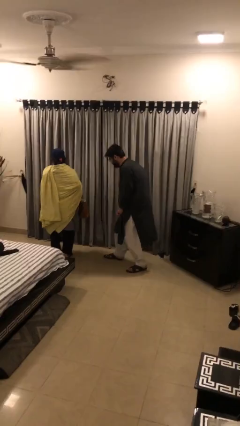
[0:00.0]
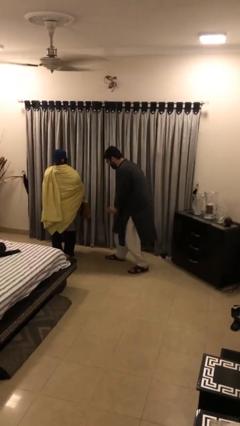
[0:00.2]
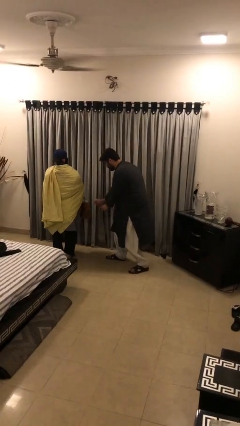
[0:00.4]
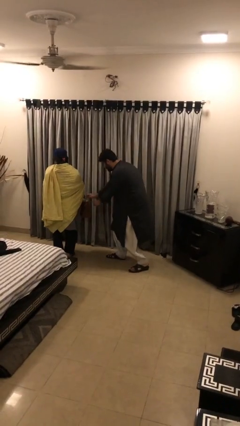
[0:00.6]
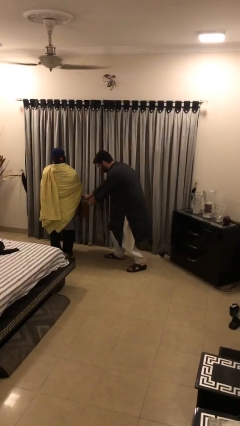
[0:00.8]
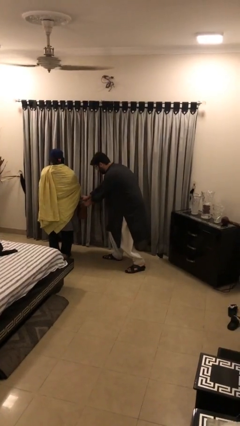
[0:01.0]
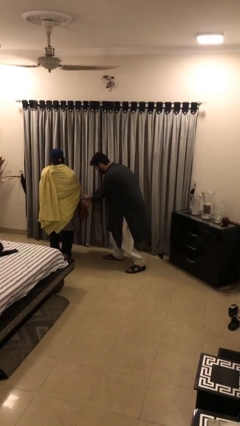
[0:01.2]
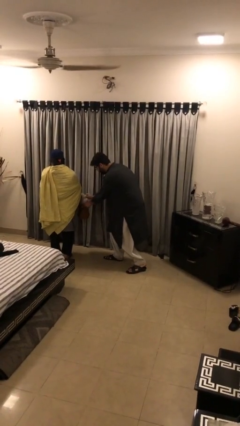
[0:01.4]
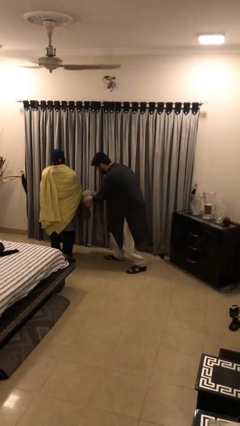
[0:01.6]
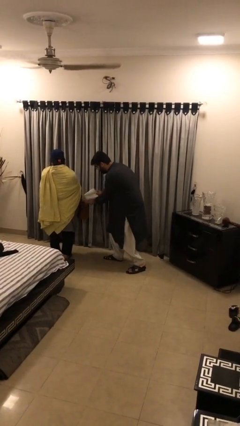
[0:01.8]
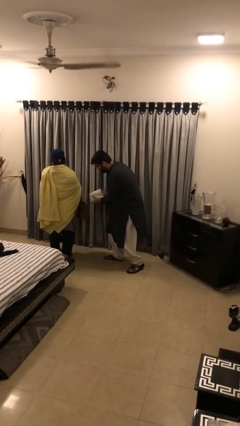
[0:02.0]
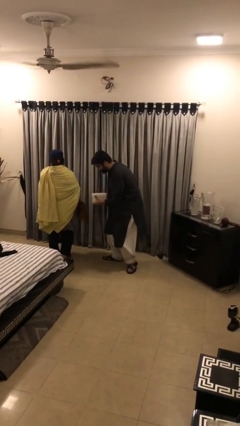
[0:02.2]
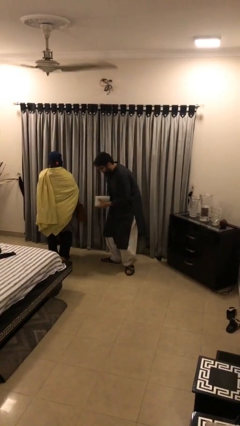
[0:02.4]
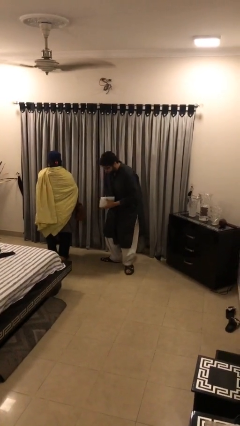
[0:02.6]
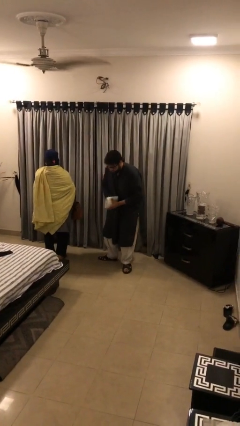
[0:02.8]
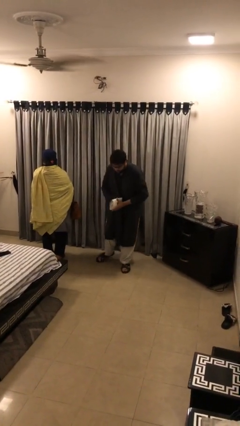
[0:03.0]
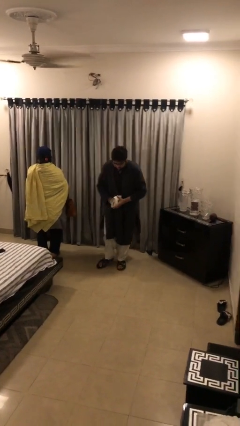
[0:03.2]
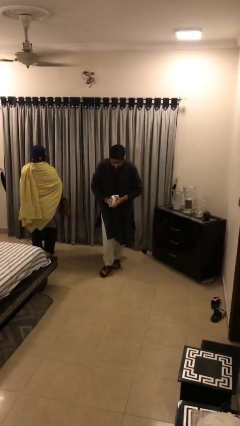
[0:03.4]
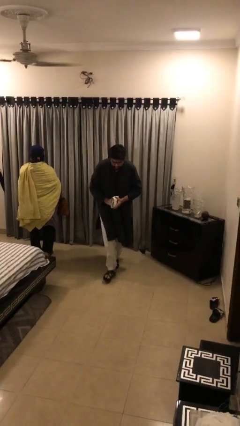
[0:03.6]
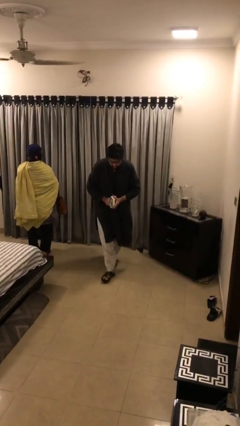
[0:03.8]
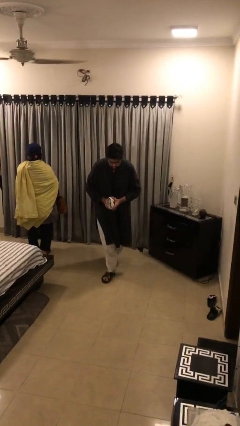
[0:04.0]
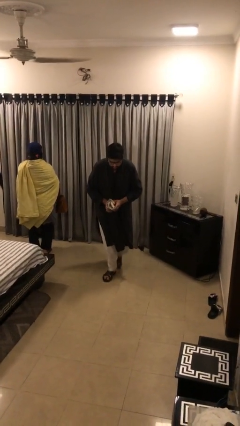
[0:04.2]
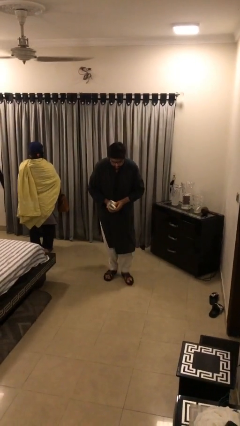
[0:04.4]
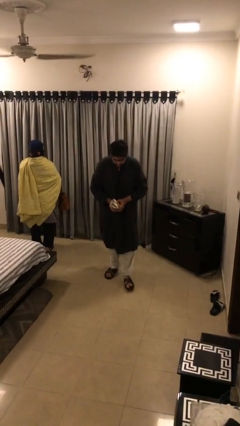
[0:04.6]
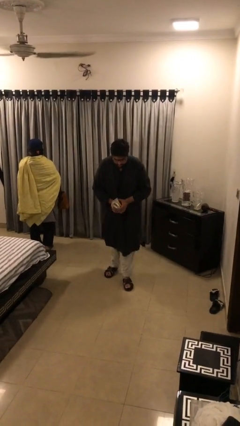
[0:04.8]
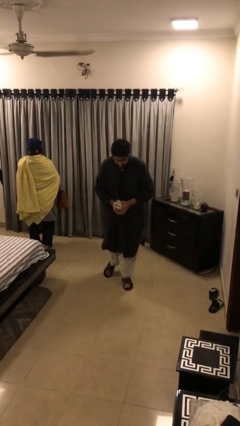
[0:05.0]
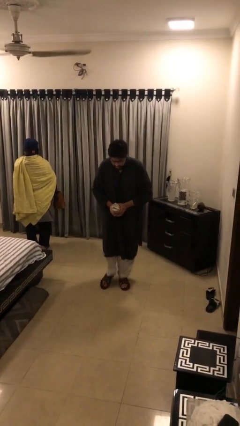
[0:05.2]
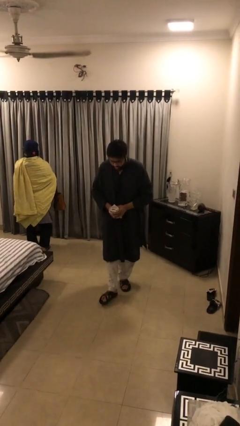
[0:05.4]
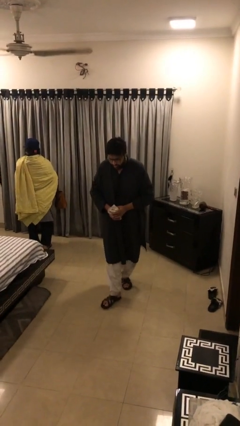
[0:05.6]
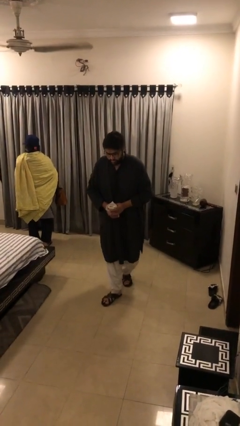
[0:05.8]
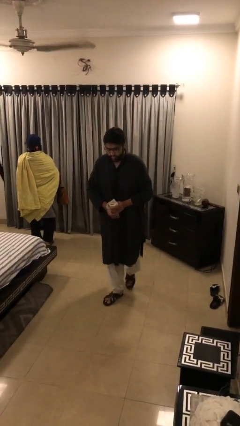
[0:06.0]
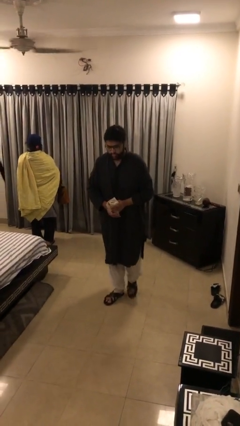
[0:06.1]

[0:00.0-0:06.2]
person steals object from person

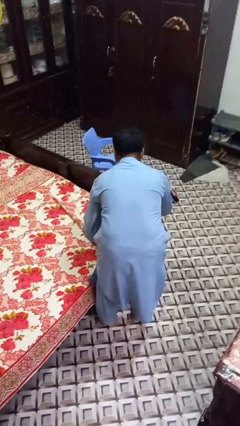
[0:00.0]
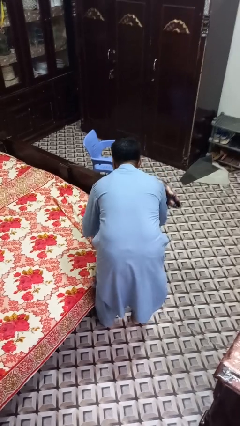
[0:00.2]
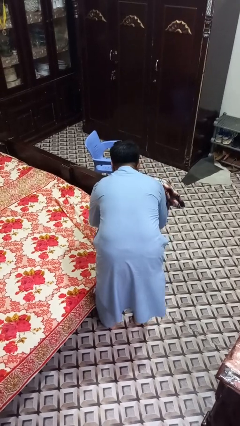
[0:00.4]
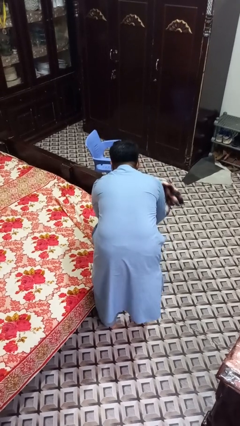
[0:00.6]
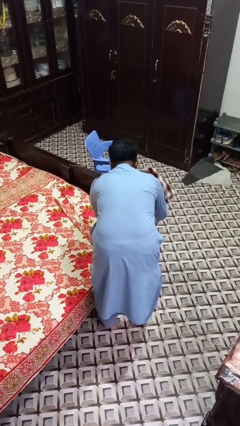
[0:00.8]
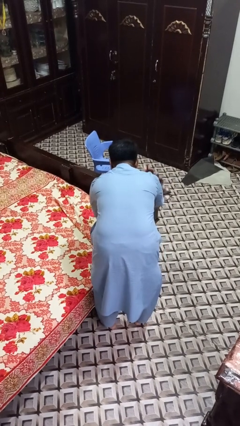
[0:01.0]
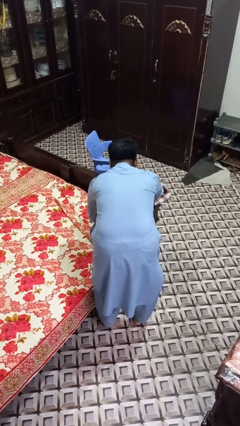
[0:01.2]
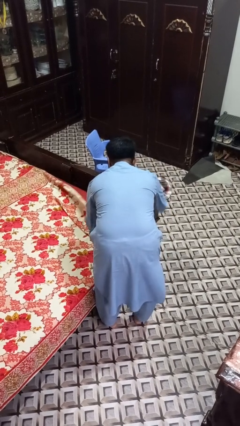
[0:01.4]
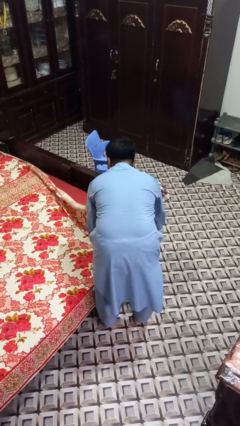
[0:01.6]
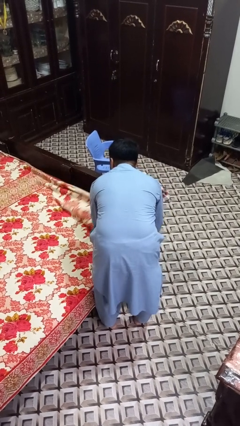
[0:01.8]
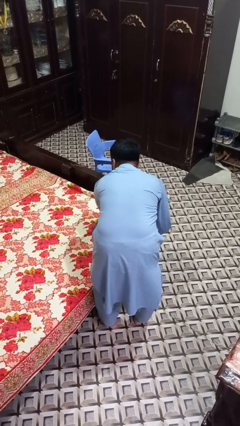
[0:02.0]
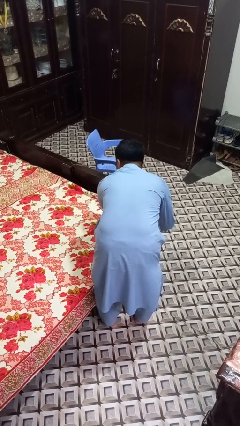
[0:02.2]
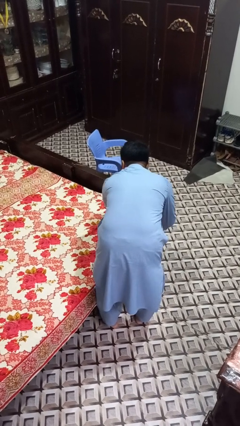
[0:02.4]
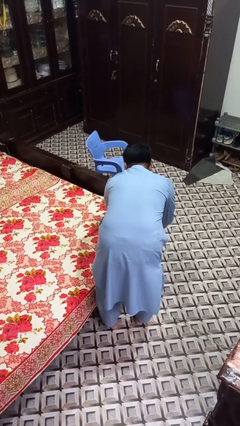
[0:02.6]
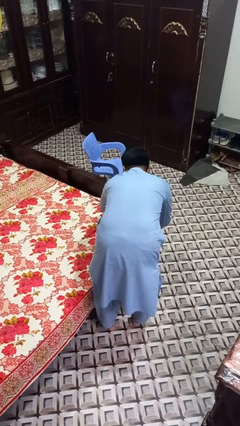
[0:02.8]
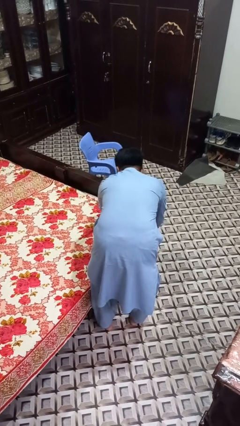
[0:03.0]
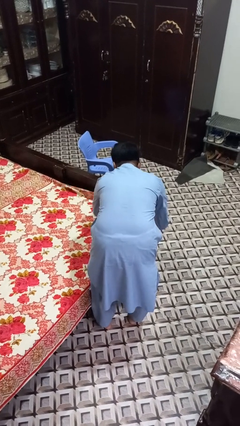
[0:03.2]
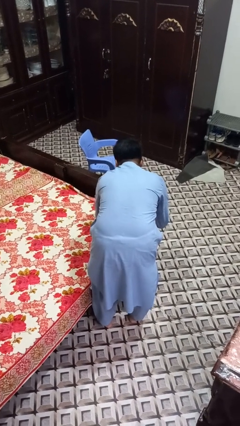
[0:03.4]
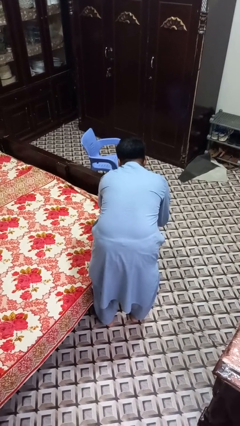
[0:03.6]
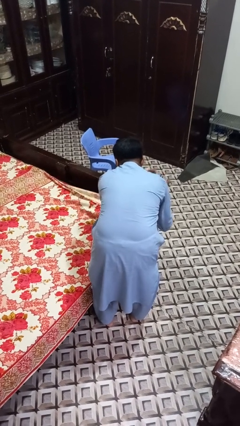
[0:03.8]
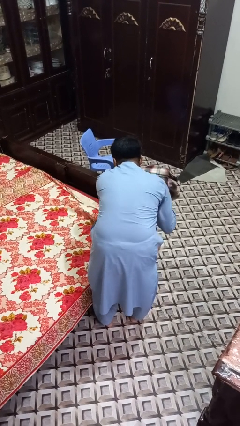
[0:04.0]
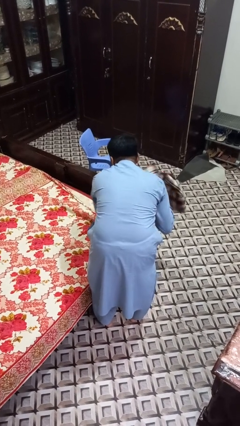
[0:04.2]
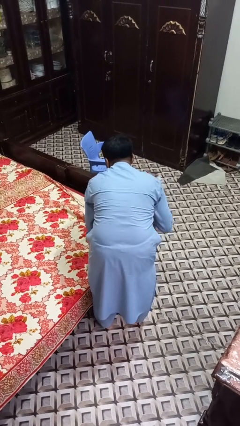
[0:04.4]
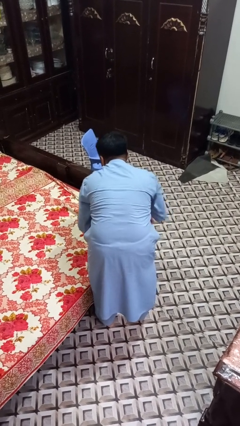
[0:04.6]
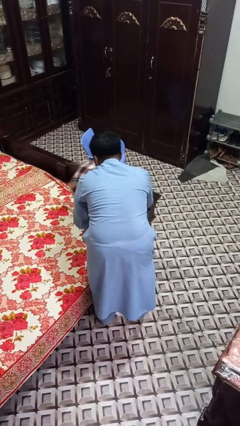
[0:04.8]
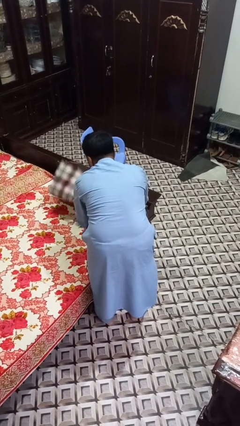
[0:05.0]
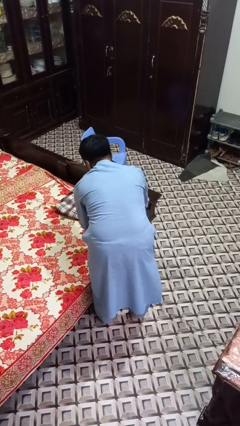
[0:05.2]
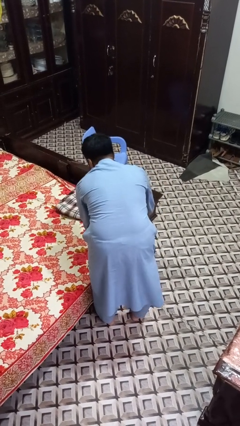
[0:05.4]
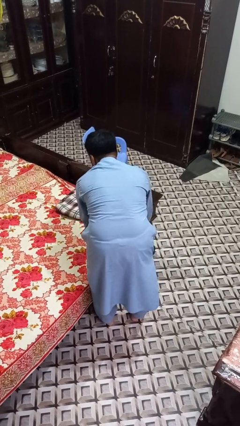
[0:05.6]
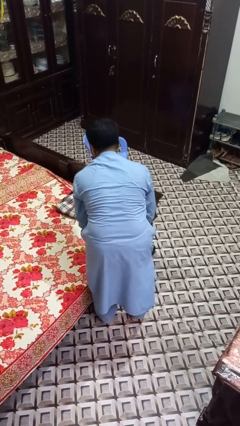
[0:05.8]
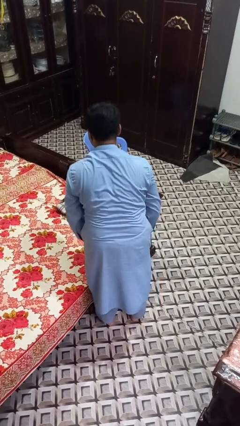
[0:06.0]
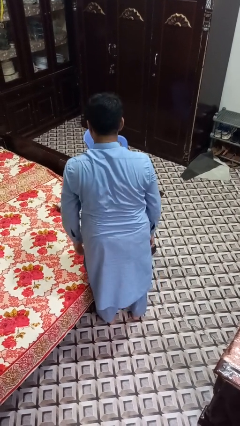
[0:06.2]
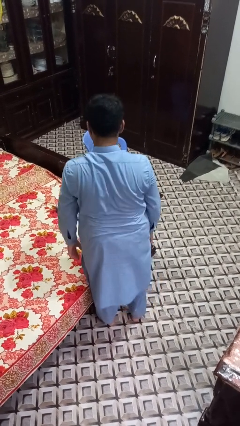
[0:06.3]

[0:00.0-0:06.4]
person makes bed

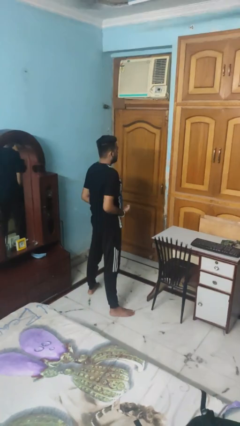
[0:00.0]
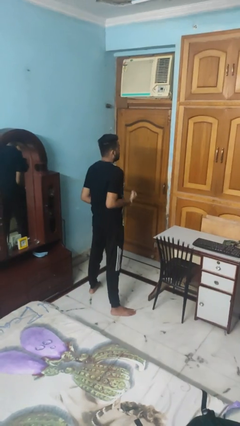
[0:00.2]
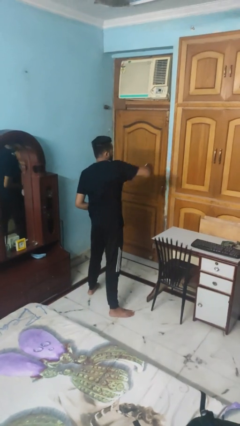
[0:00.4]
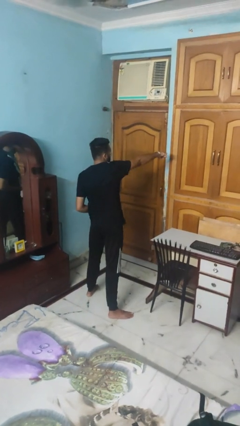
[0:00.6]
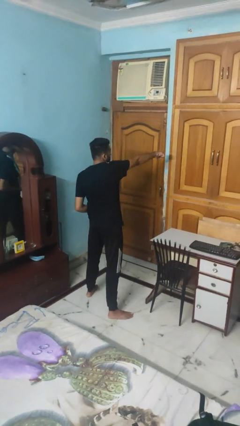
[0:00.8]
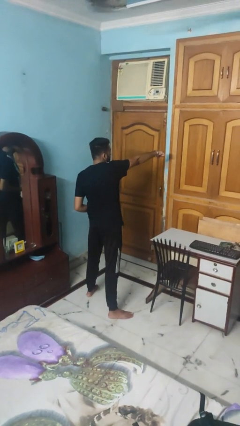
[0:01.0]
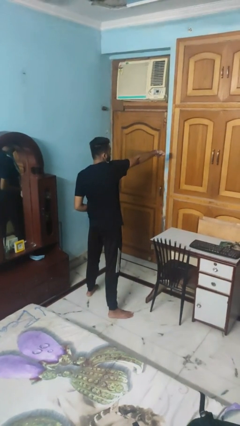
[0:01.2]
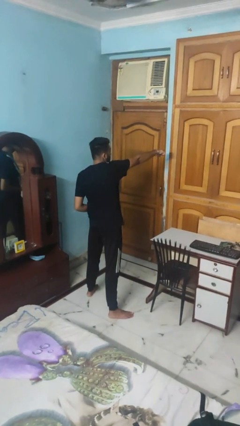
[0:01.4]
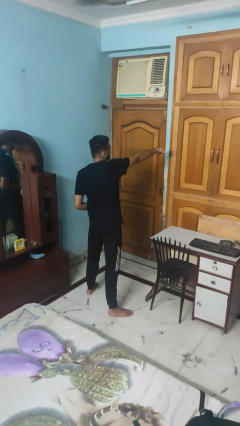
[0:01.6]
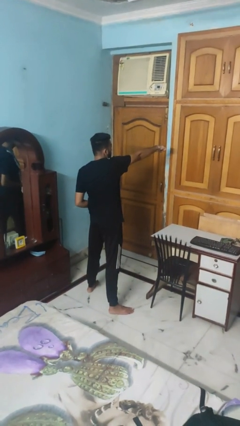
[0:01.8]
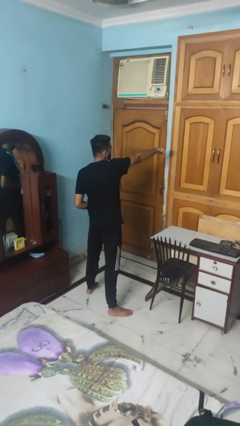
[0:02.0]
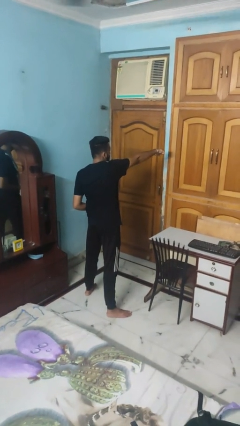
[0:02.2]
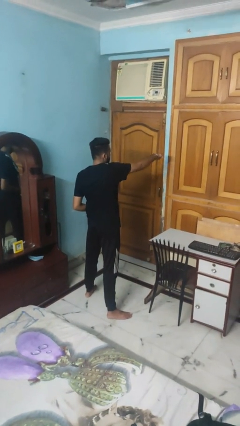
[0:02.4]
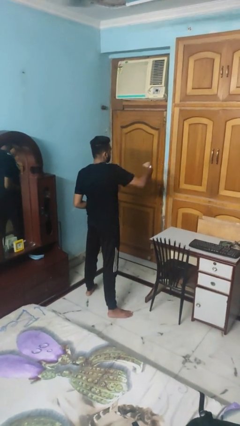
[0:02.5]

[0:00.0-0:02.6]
person punches

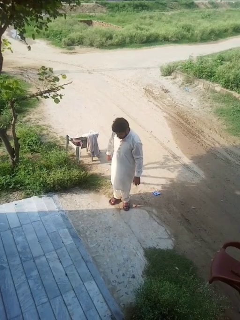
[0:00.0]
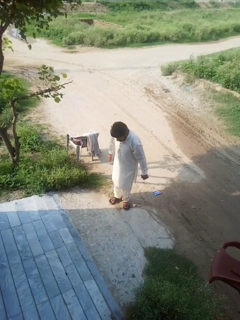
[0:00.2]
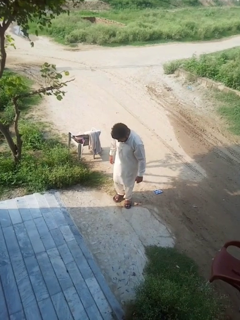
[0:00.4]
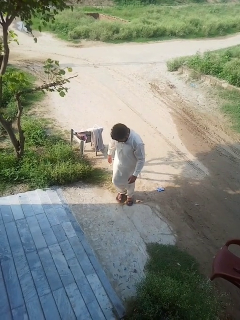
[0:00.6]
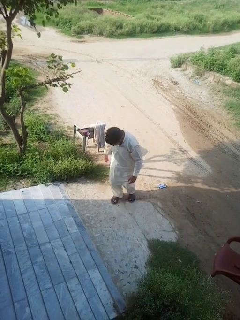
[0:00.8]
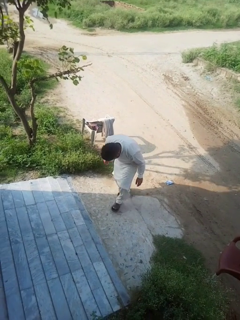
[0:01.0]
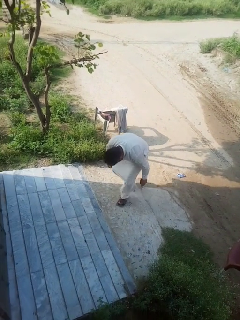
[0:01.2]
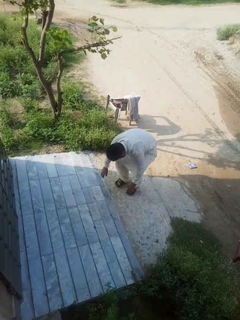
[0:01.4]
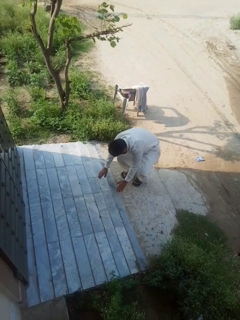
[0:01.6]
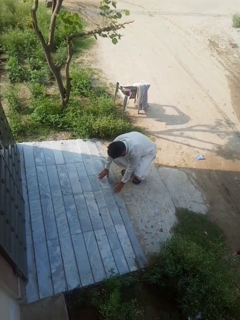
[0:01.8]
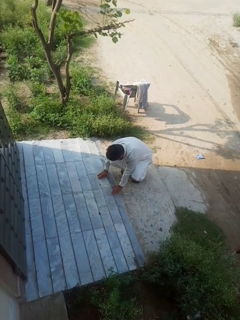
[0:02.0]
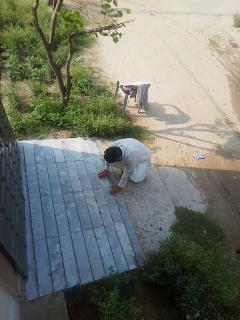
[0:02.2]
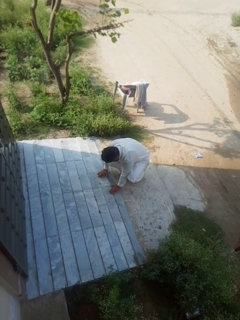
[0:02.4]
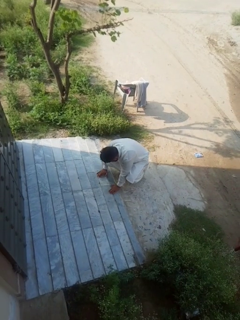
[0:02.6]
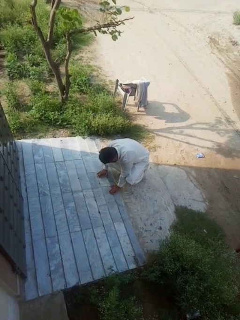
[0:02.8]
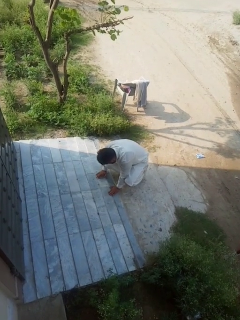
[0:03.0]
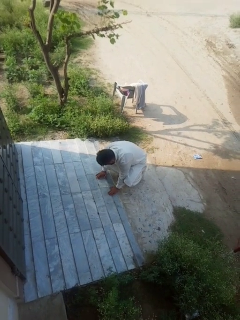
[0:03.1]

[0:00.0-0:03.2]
person trips on object on floor
